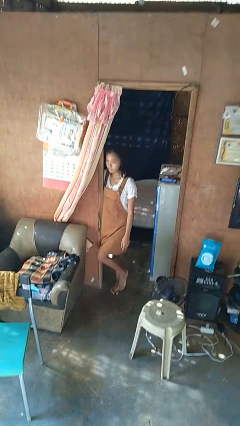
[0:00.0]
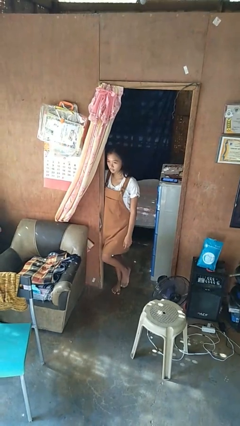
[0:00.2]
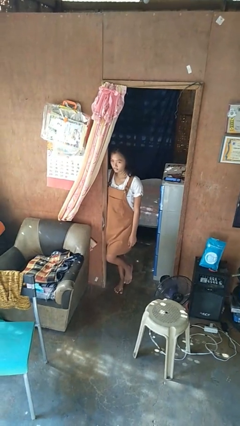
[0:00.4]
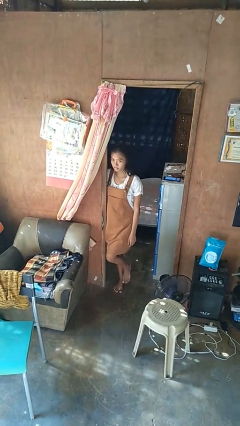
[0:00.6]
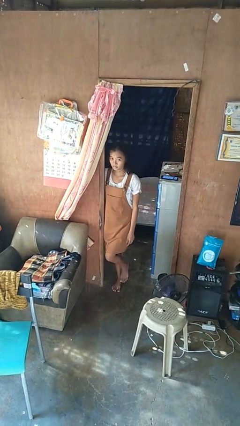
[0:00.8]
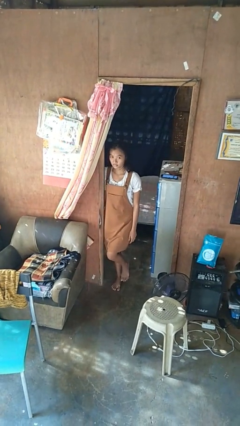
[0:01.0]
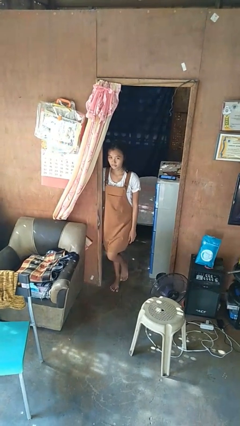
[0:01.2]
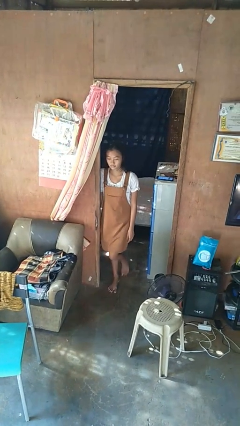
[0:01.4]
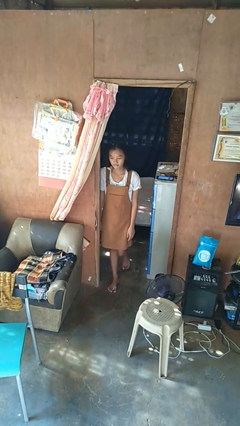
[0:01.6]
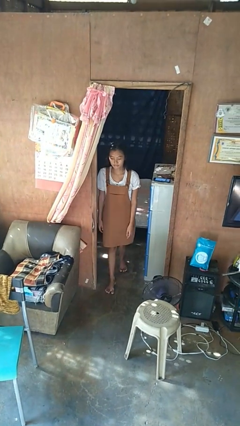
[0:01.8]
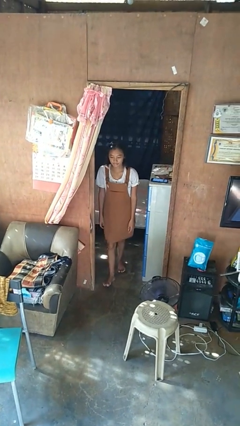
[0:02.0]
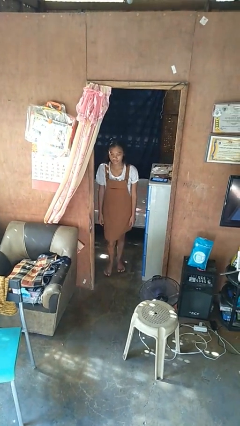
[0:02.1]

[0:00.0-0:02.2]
person bumps into wall

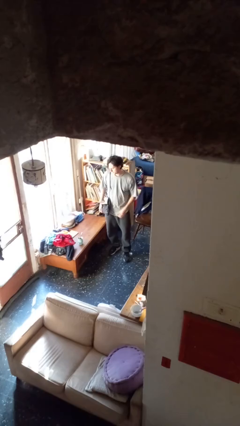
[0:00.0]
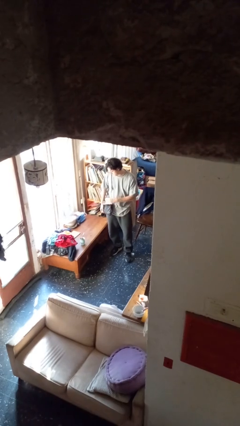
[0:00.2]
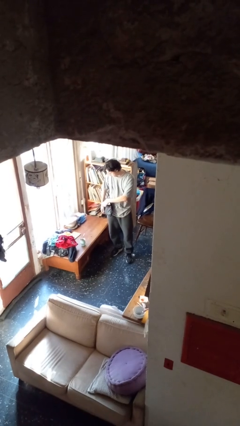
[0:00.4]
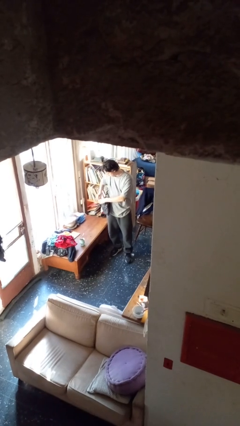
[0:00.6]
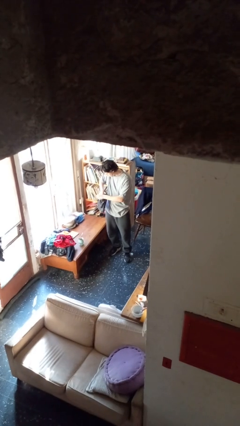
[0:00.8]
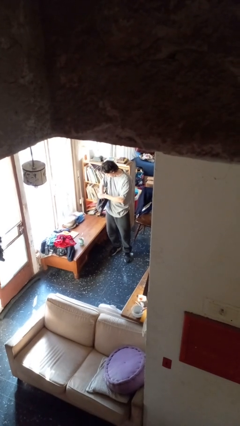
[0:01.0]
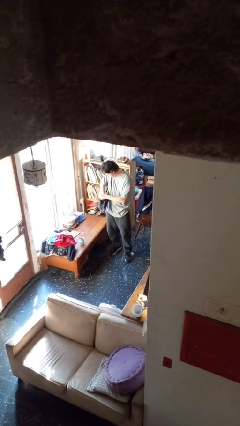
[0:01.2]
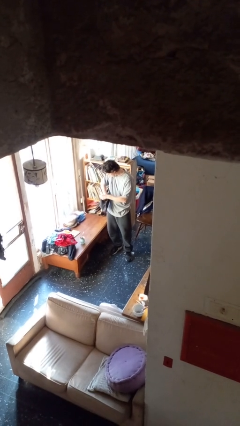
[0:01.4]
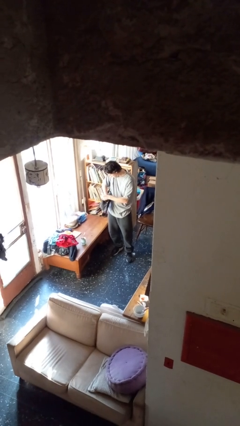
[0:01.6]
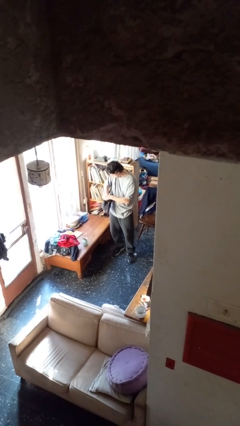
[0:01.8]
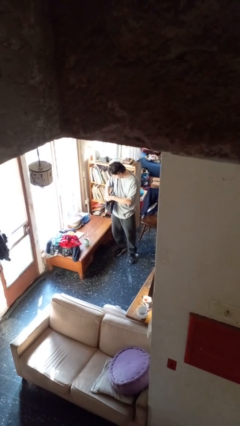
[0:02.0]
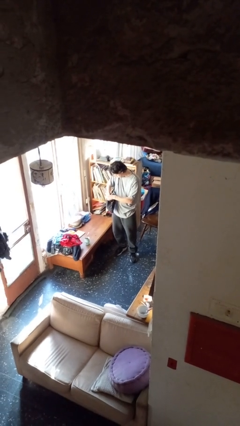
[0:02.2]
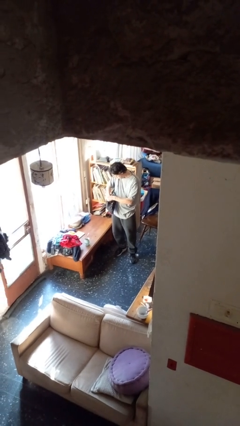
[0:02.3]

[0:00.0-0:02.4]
person searches in purse

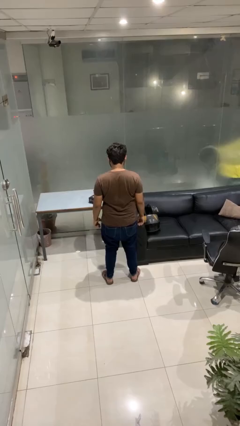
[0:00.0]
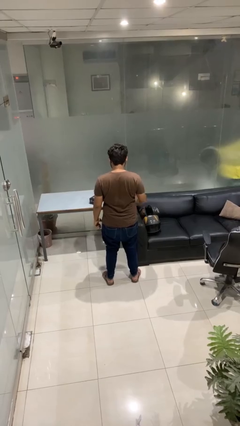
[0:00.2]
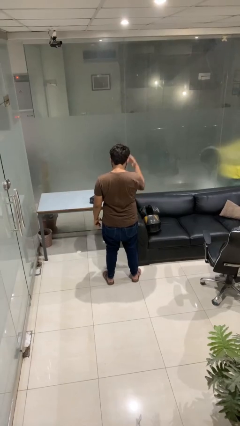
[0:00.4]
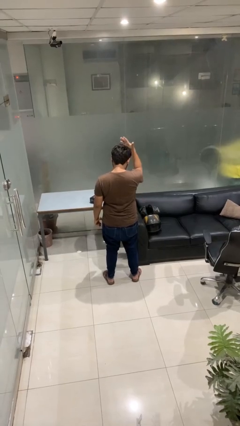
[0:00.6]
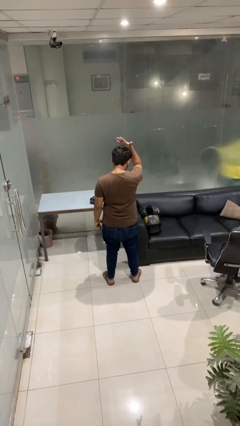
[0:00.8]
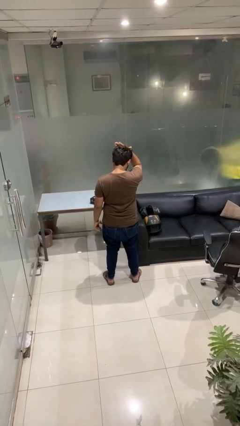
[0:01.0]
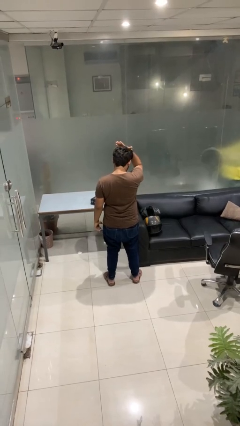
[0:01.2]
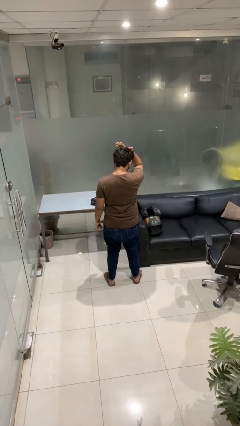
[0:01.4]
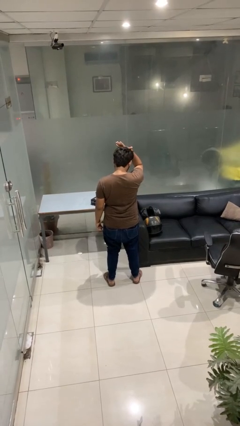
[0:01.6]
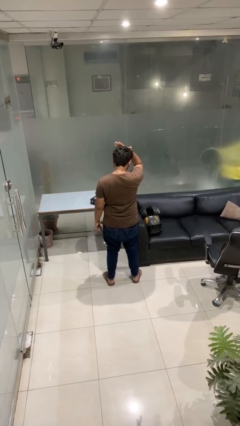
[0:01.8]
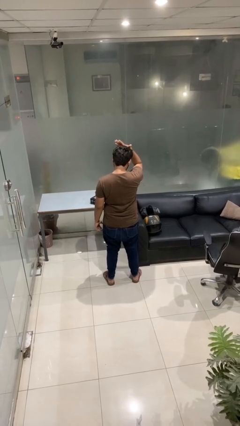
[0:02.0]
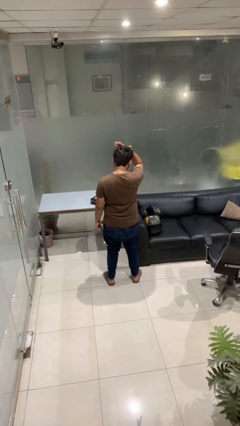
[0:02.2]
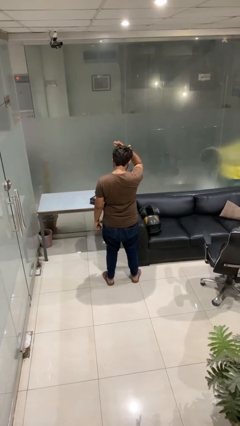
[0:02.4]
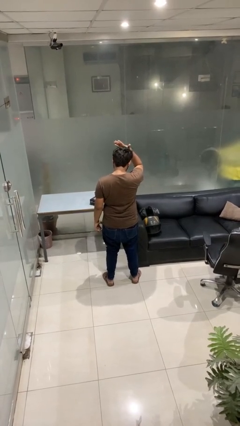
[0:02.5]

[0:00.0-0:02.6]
person pats head

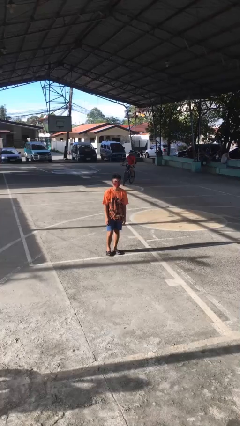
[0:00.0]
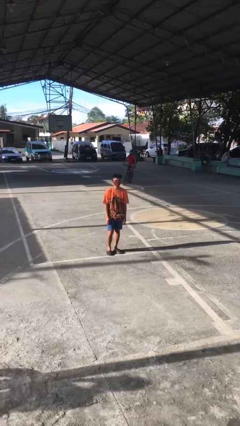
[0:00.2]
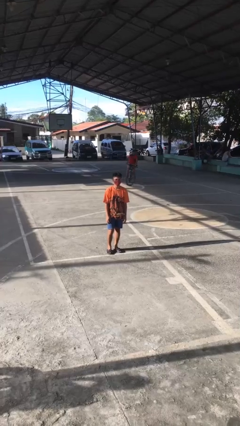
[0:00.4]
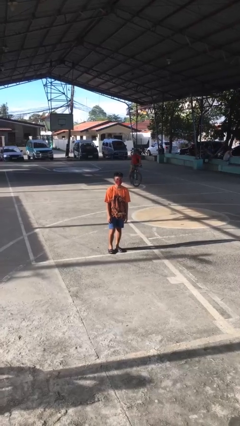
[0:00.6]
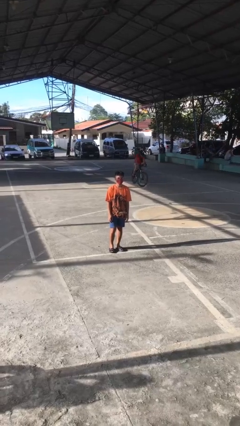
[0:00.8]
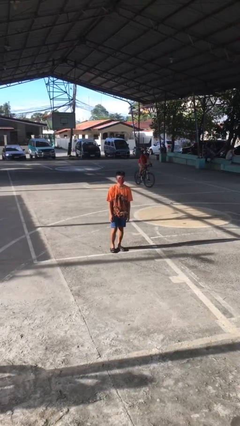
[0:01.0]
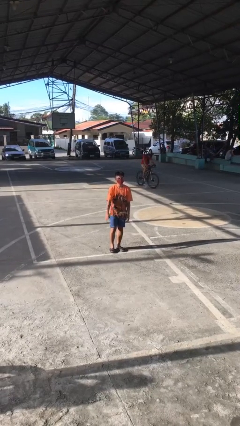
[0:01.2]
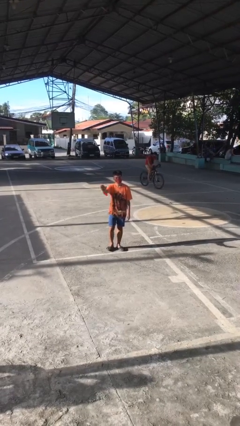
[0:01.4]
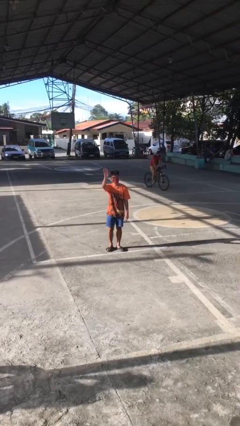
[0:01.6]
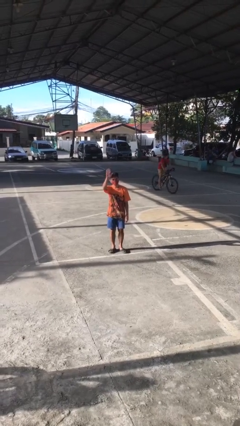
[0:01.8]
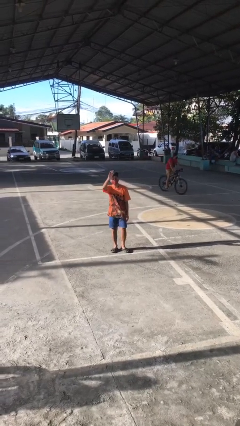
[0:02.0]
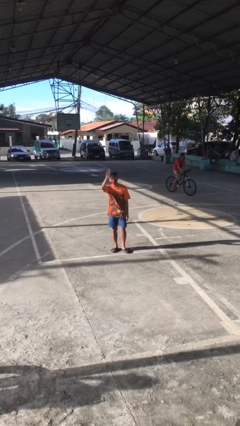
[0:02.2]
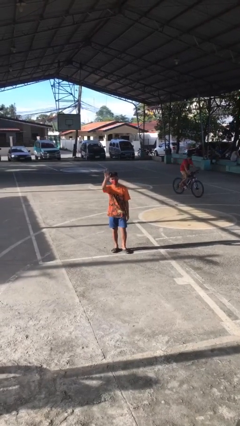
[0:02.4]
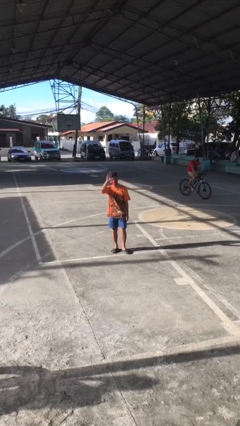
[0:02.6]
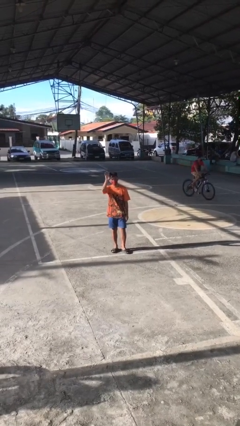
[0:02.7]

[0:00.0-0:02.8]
person waves at person

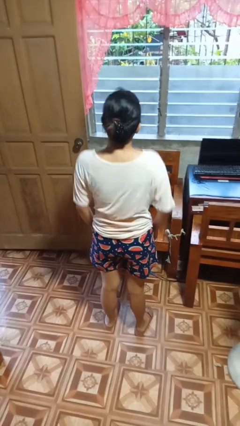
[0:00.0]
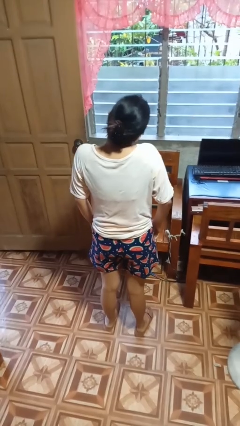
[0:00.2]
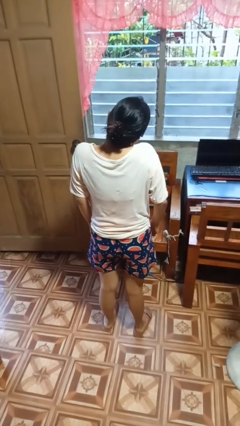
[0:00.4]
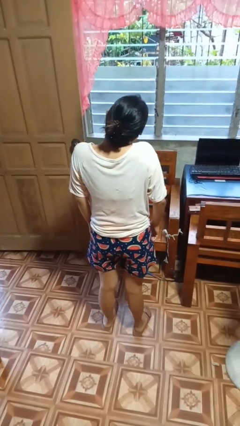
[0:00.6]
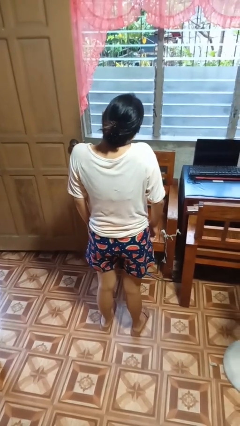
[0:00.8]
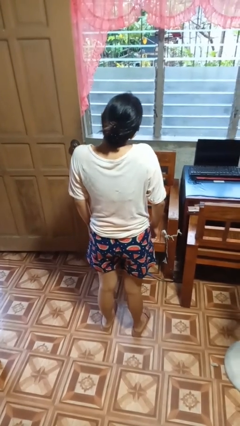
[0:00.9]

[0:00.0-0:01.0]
person shrugs

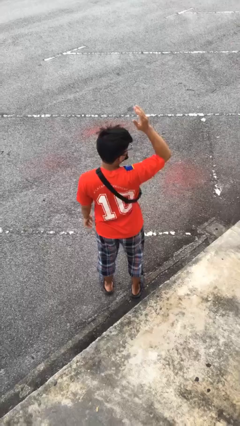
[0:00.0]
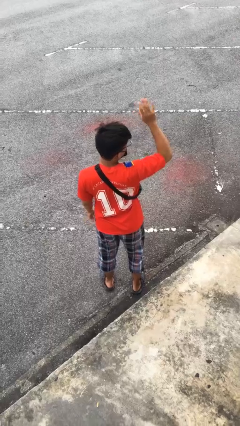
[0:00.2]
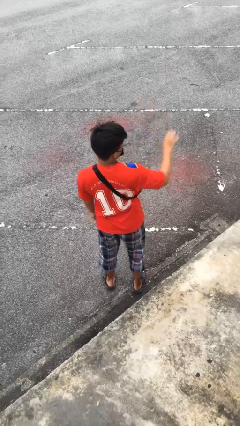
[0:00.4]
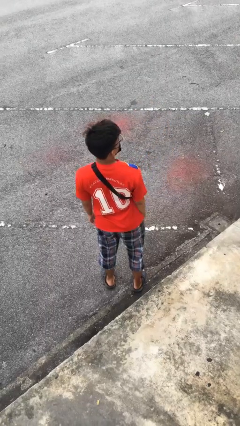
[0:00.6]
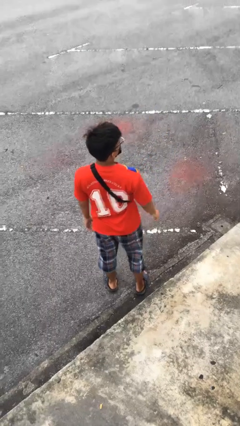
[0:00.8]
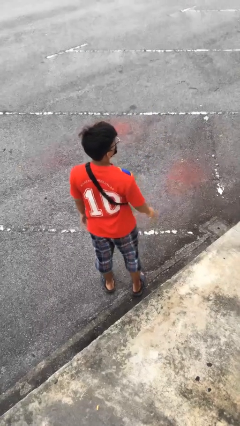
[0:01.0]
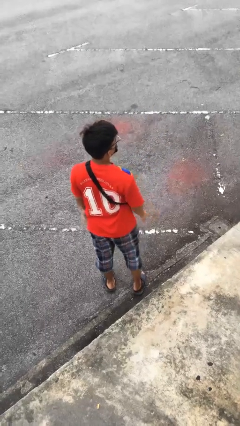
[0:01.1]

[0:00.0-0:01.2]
person gestures swipe down

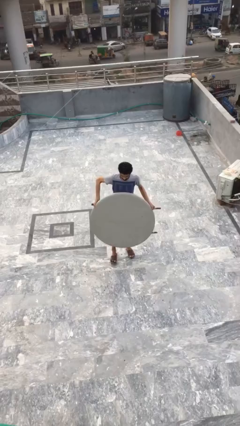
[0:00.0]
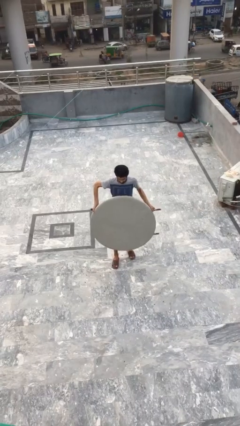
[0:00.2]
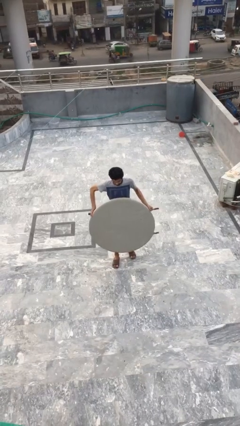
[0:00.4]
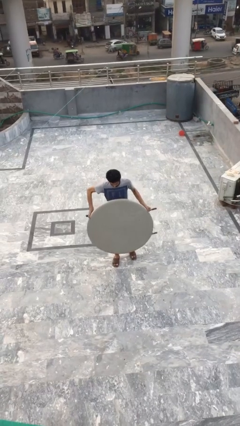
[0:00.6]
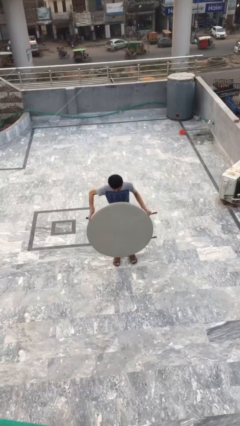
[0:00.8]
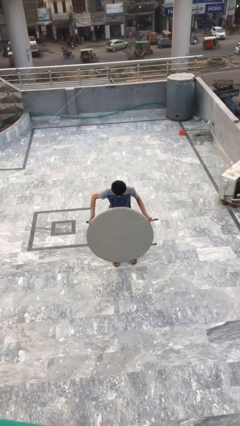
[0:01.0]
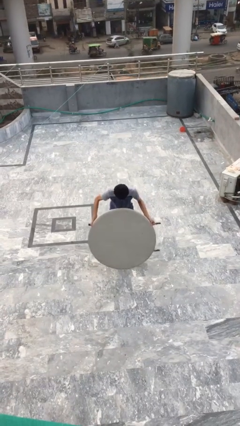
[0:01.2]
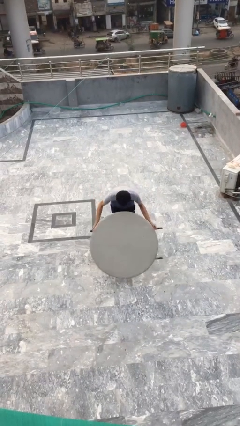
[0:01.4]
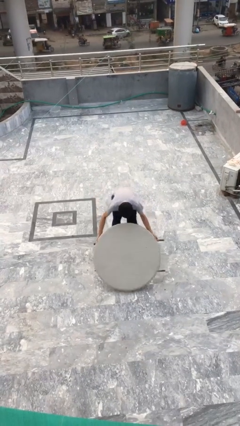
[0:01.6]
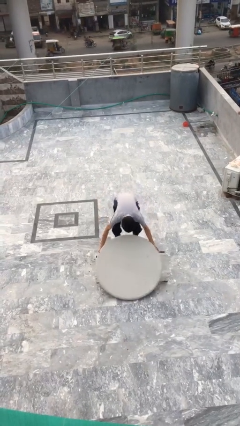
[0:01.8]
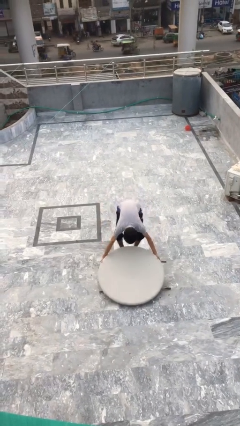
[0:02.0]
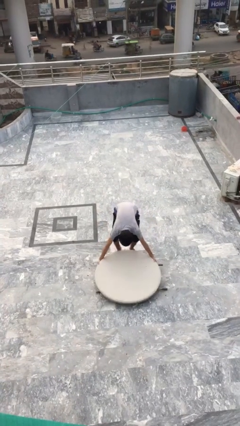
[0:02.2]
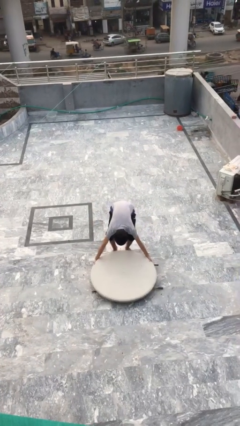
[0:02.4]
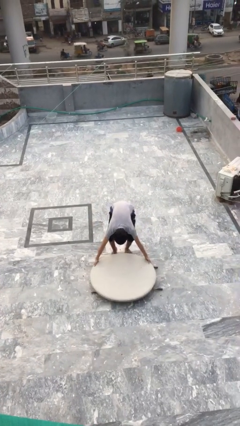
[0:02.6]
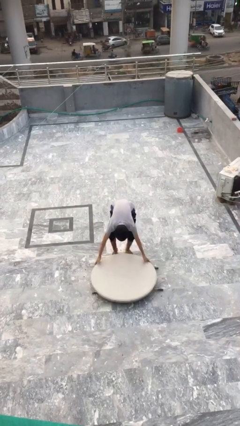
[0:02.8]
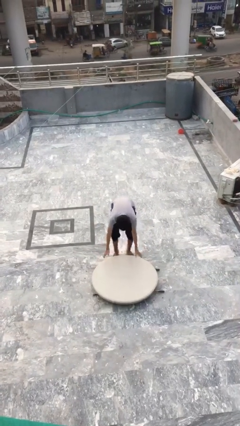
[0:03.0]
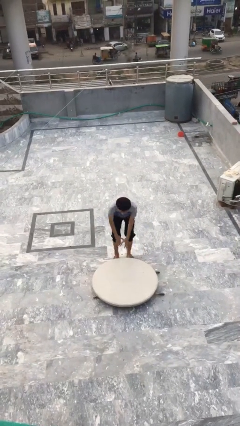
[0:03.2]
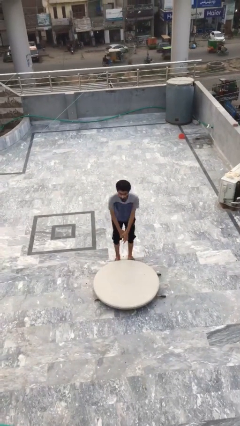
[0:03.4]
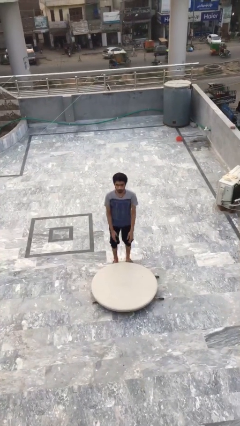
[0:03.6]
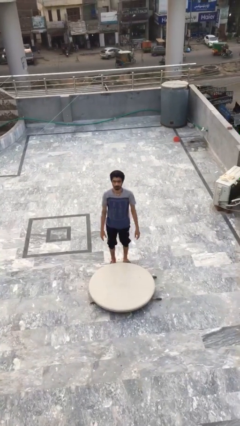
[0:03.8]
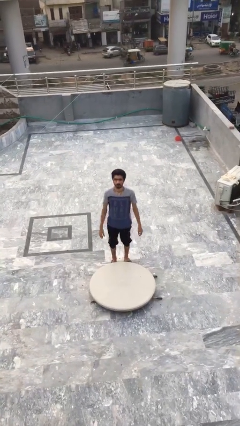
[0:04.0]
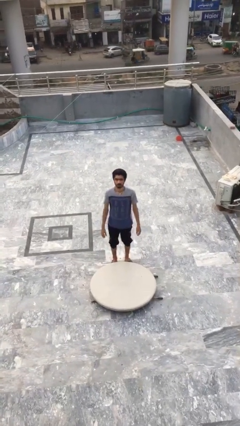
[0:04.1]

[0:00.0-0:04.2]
person puts down object on floor

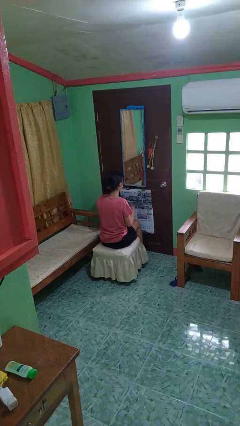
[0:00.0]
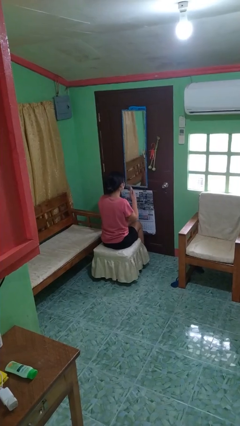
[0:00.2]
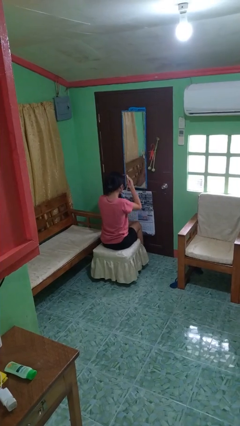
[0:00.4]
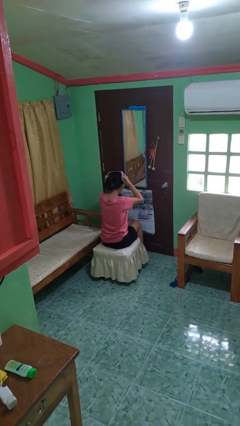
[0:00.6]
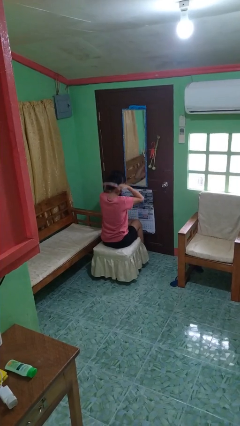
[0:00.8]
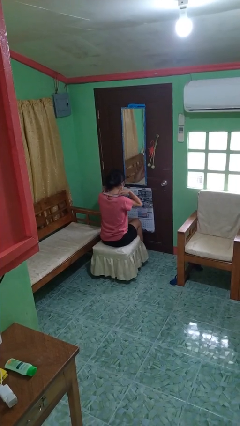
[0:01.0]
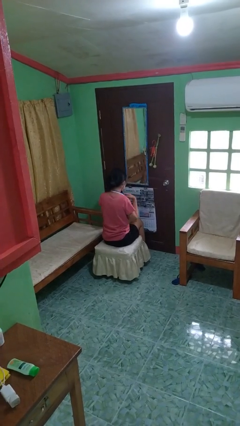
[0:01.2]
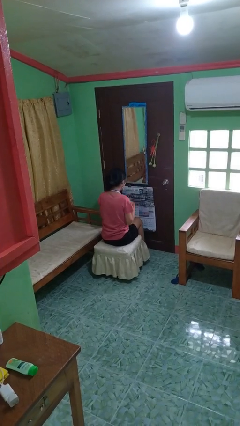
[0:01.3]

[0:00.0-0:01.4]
person puts on necklace
